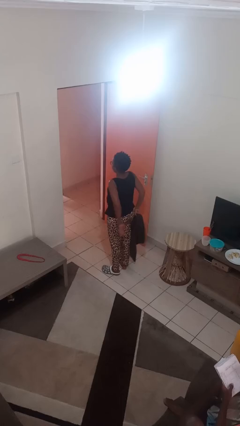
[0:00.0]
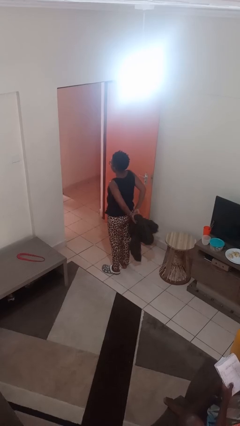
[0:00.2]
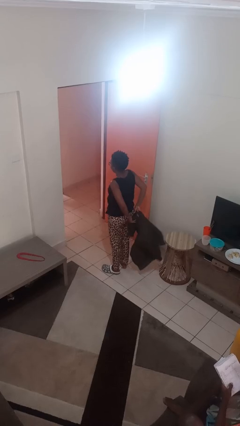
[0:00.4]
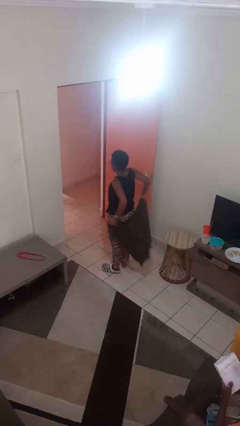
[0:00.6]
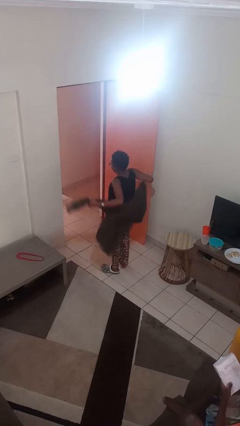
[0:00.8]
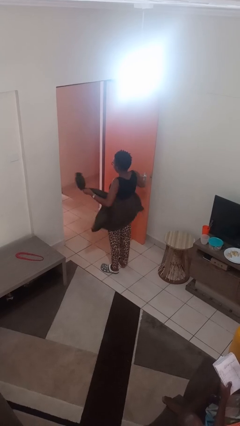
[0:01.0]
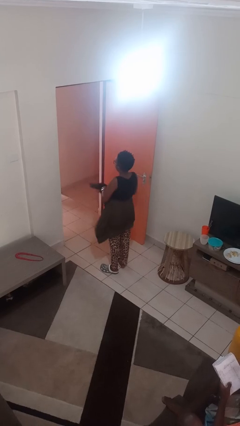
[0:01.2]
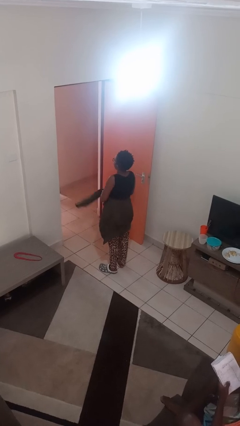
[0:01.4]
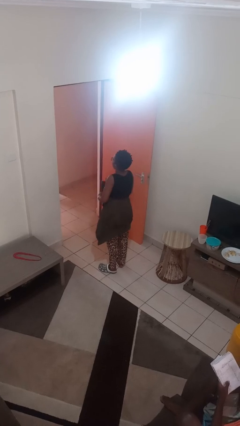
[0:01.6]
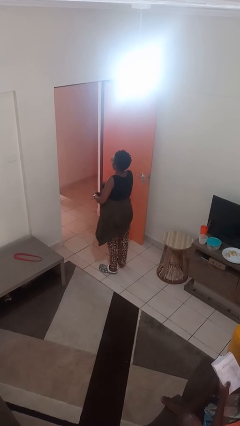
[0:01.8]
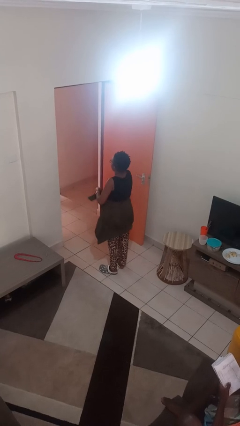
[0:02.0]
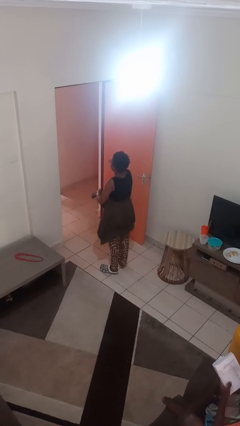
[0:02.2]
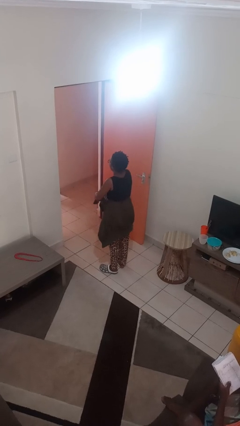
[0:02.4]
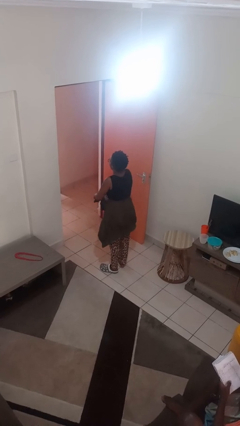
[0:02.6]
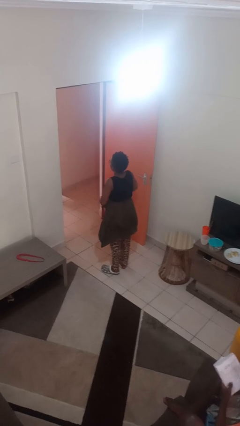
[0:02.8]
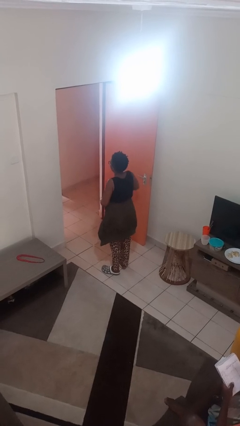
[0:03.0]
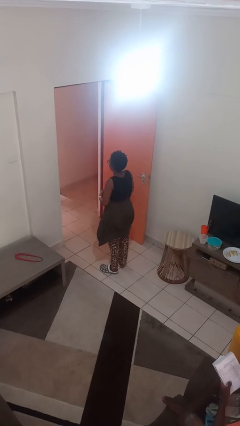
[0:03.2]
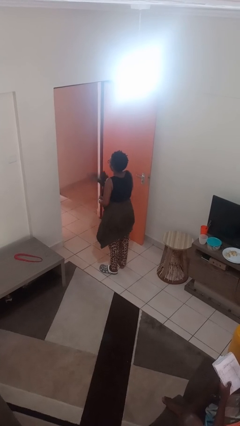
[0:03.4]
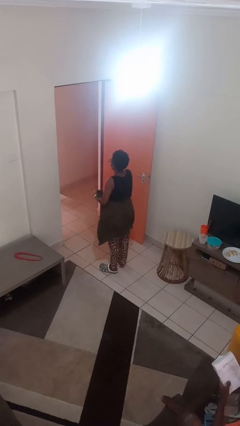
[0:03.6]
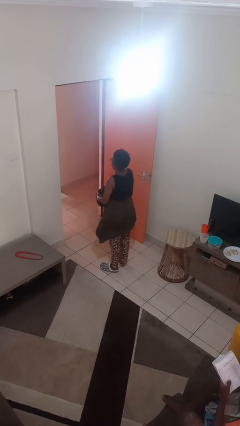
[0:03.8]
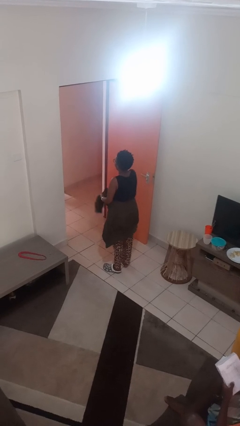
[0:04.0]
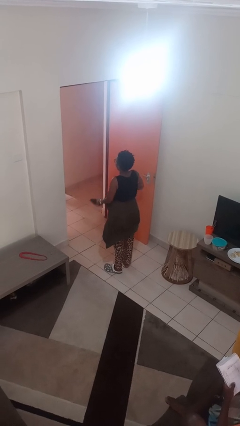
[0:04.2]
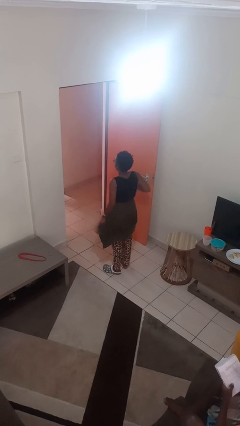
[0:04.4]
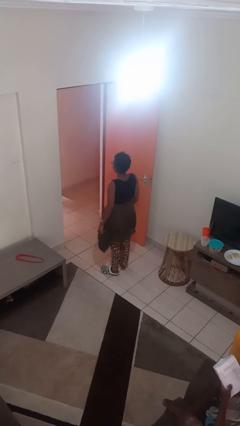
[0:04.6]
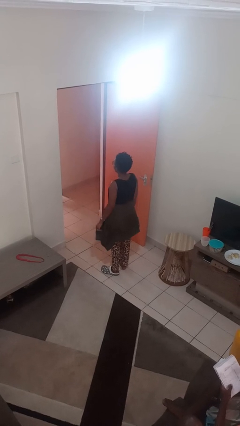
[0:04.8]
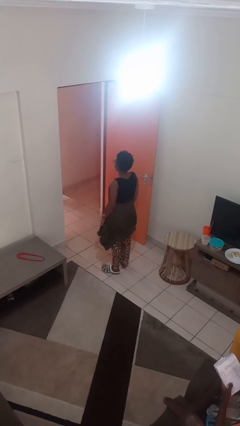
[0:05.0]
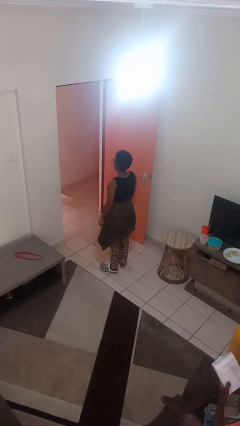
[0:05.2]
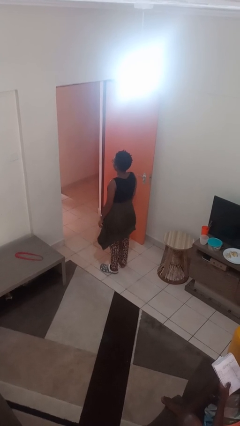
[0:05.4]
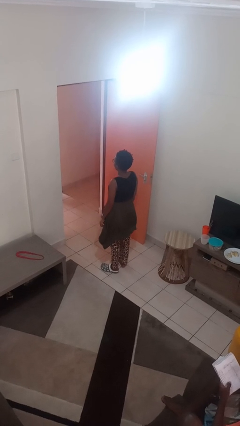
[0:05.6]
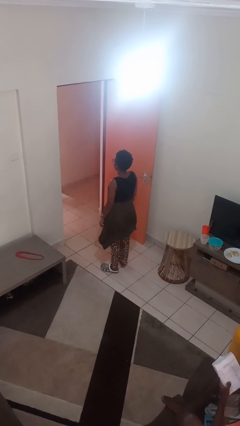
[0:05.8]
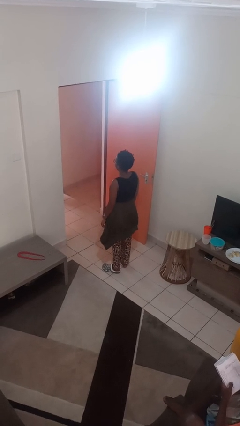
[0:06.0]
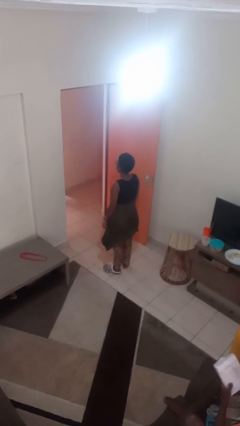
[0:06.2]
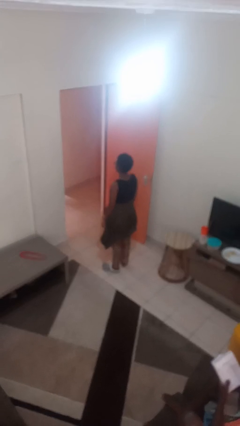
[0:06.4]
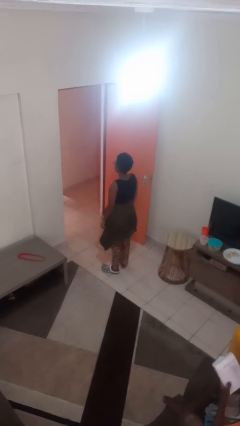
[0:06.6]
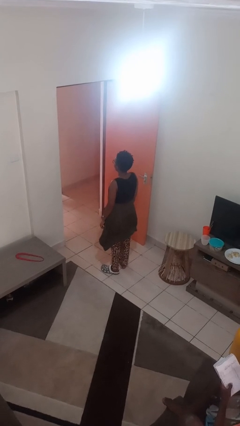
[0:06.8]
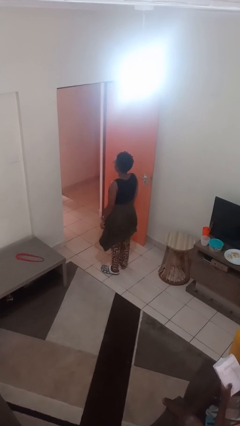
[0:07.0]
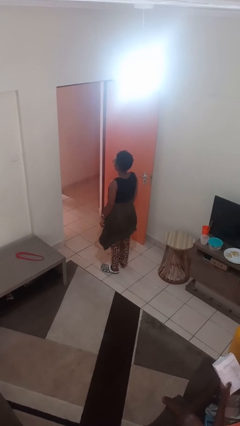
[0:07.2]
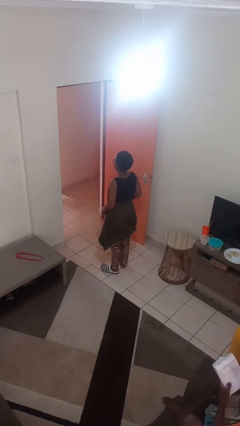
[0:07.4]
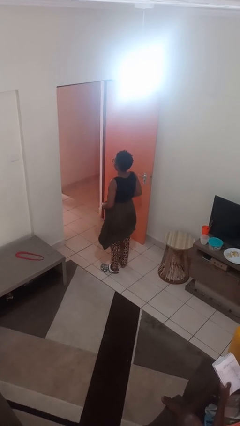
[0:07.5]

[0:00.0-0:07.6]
person ties jacket around waist

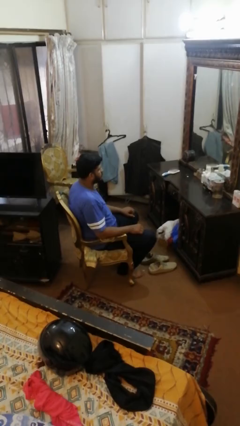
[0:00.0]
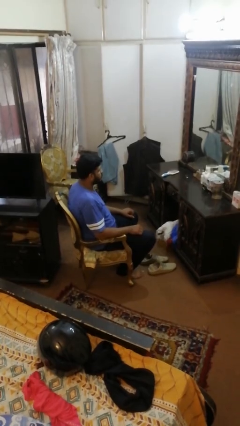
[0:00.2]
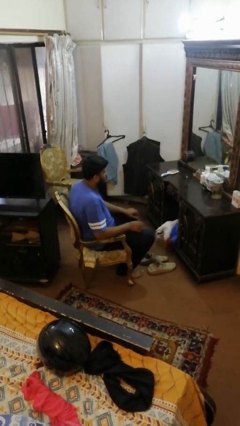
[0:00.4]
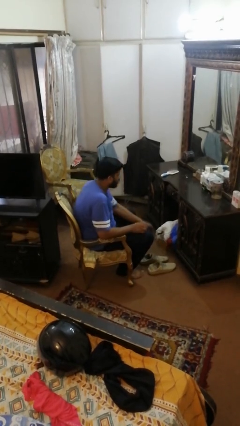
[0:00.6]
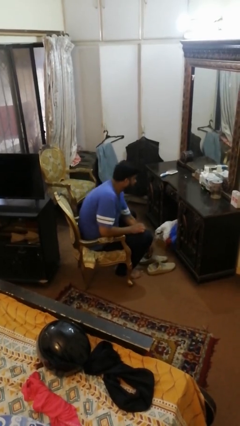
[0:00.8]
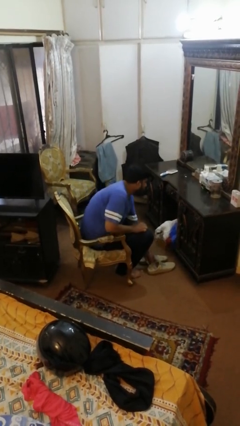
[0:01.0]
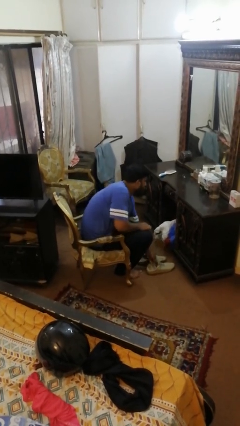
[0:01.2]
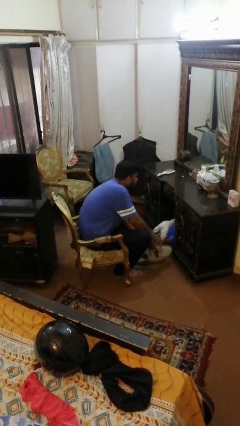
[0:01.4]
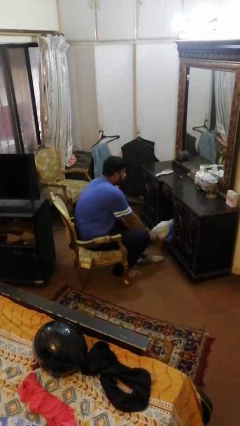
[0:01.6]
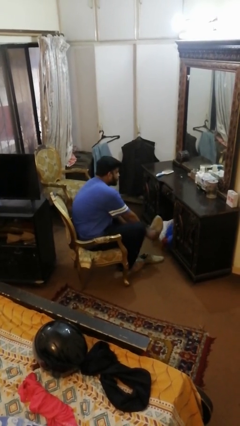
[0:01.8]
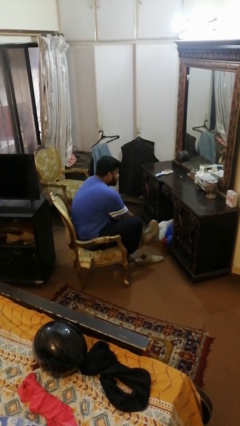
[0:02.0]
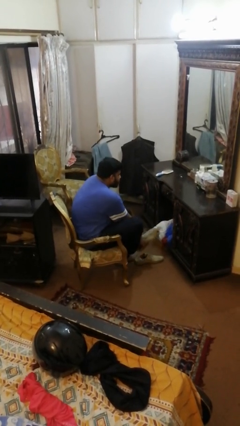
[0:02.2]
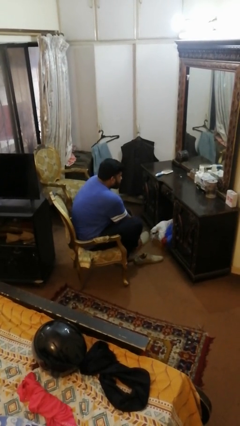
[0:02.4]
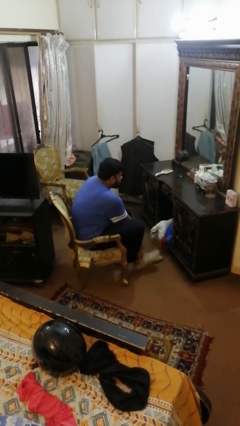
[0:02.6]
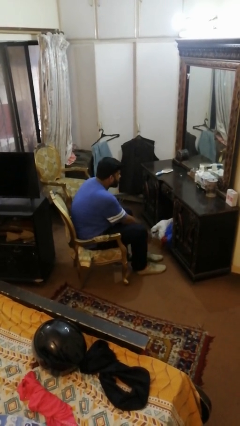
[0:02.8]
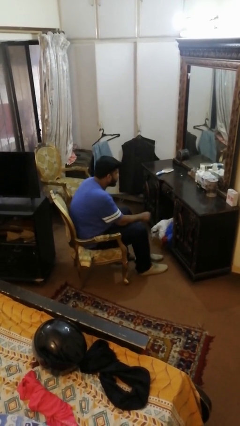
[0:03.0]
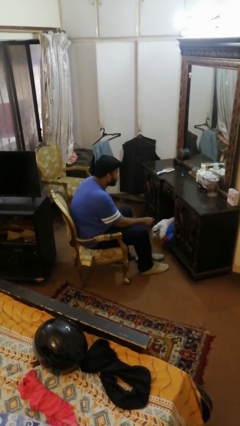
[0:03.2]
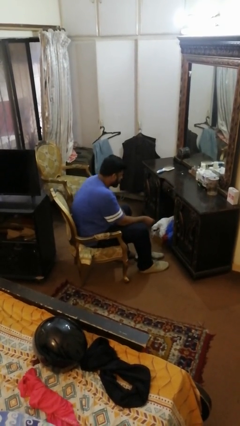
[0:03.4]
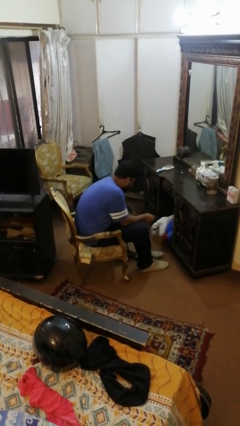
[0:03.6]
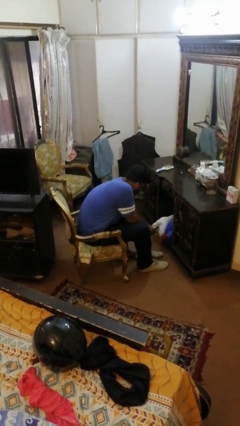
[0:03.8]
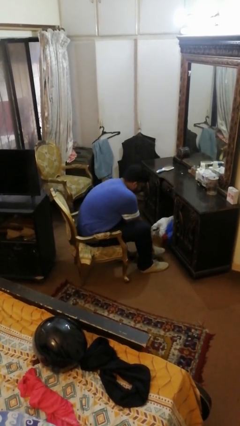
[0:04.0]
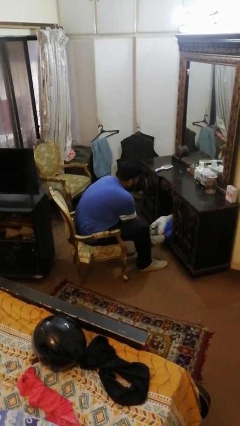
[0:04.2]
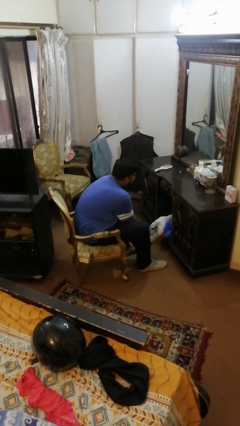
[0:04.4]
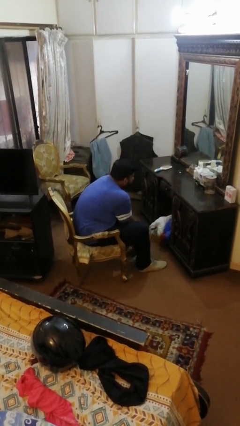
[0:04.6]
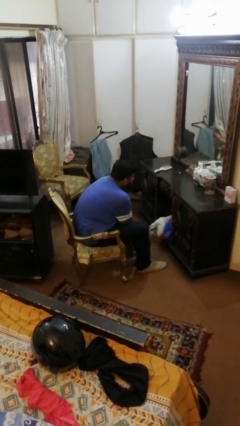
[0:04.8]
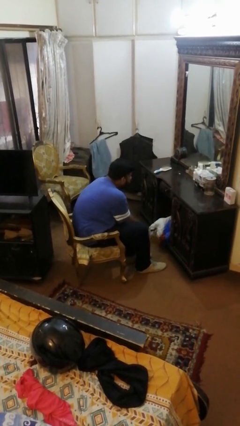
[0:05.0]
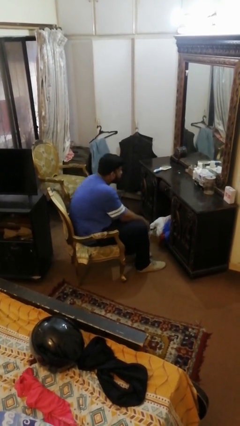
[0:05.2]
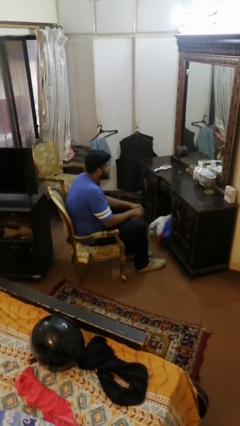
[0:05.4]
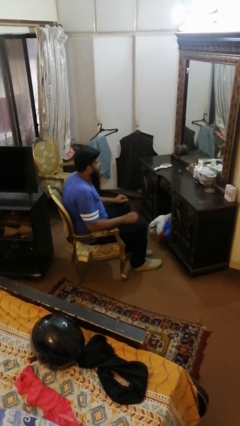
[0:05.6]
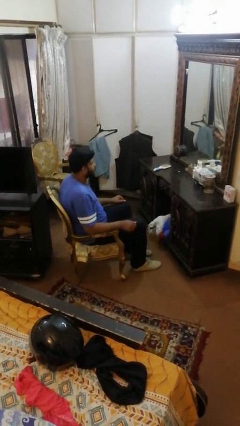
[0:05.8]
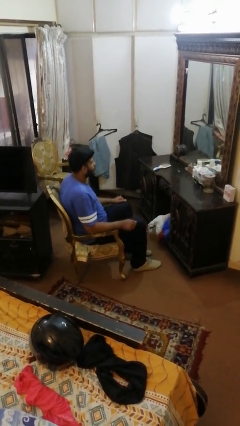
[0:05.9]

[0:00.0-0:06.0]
person puts on shoes

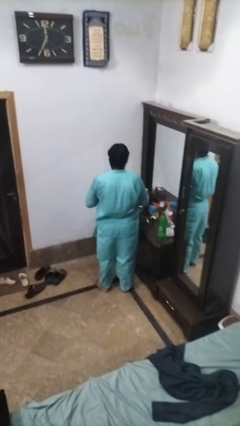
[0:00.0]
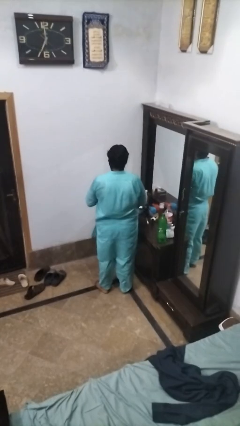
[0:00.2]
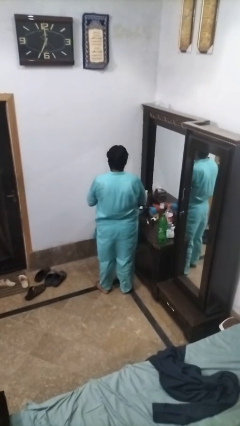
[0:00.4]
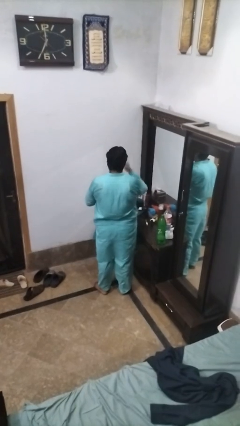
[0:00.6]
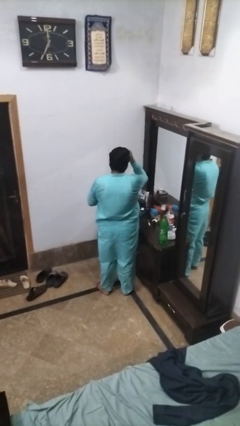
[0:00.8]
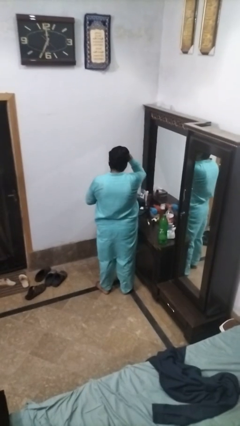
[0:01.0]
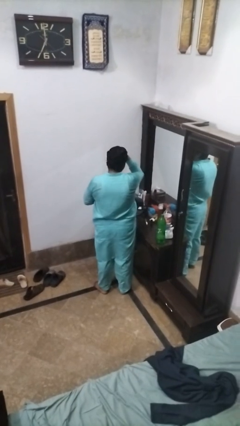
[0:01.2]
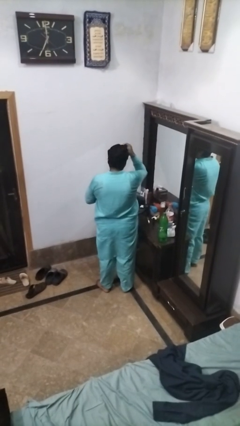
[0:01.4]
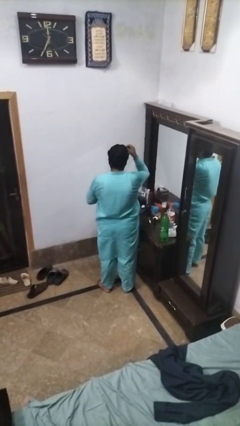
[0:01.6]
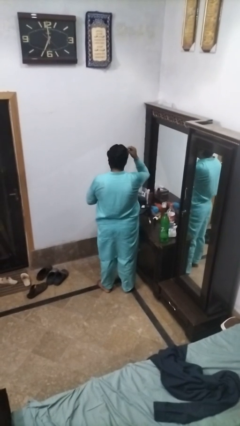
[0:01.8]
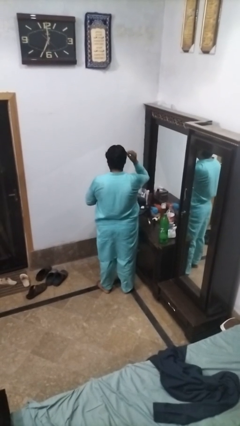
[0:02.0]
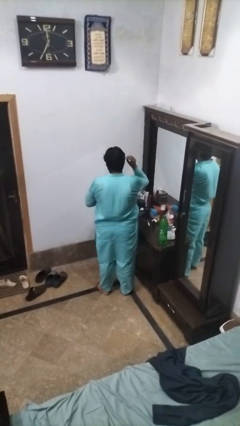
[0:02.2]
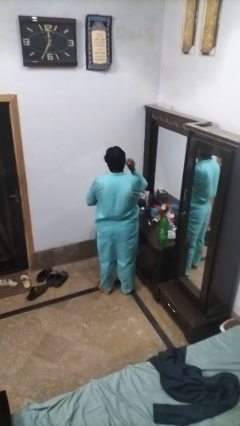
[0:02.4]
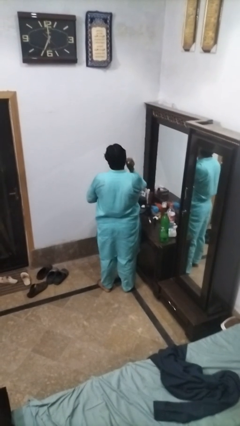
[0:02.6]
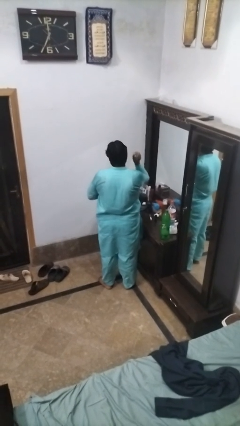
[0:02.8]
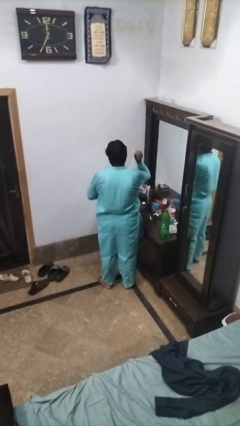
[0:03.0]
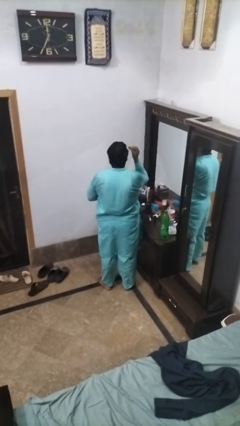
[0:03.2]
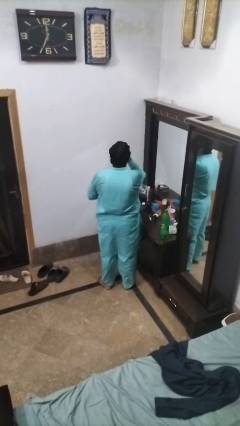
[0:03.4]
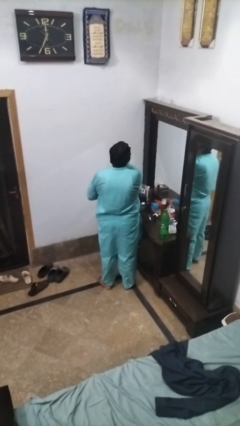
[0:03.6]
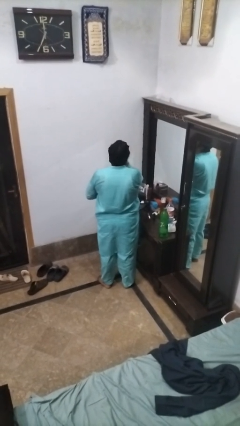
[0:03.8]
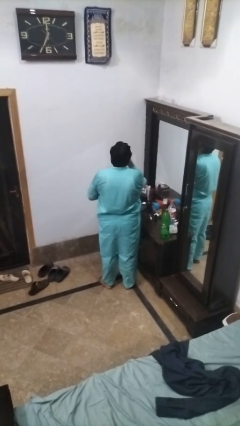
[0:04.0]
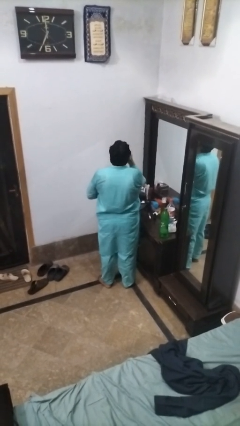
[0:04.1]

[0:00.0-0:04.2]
person applies foundation makeup

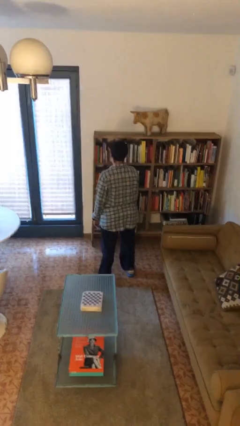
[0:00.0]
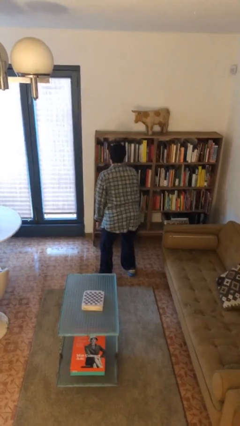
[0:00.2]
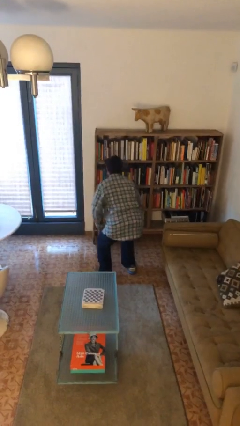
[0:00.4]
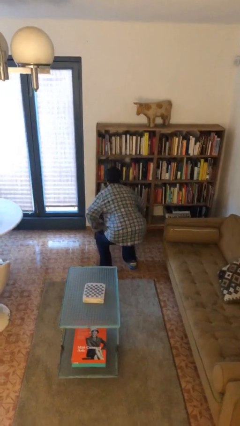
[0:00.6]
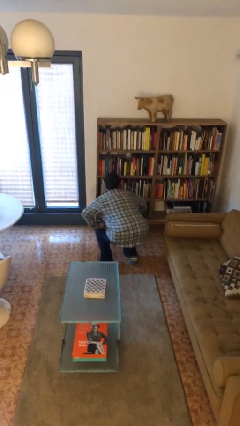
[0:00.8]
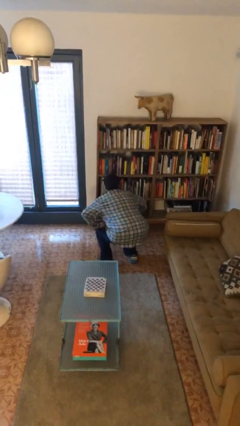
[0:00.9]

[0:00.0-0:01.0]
person squats
